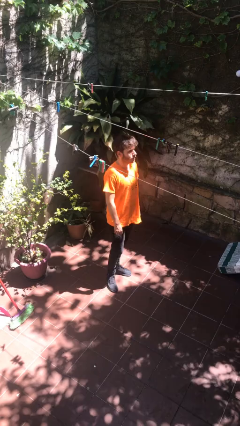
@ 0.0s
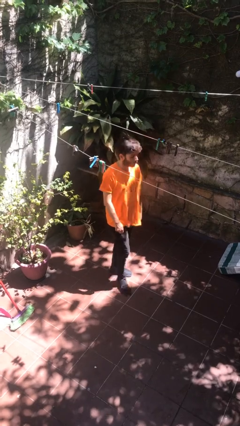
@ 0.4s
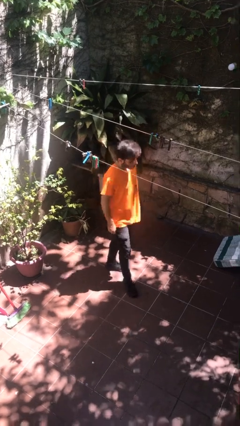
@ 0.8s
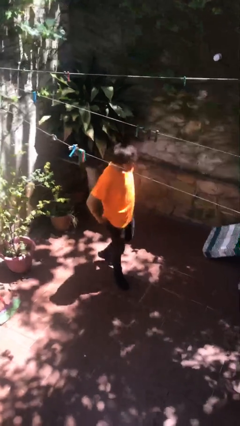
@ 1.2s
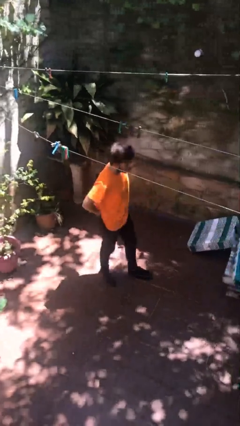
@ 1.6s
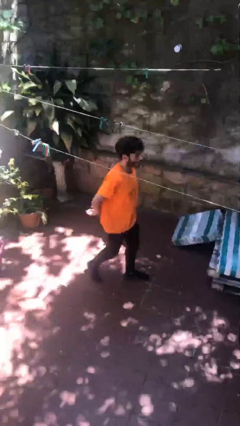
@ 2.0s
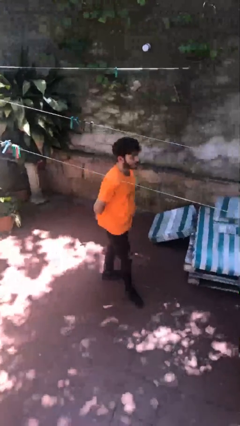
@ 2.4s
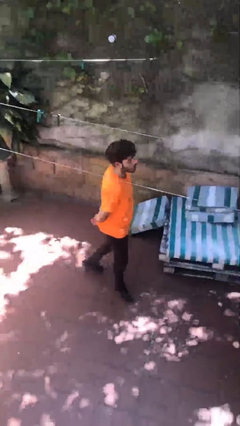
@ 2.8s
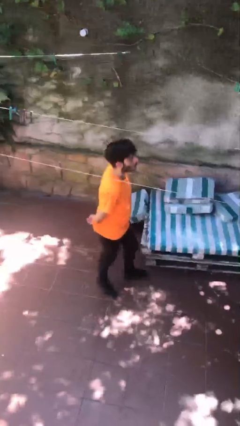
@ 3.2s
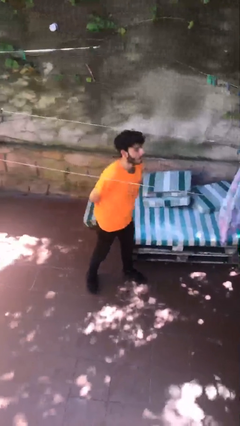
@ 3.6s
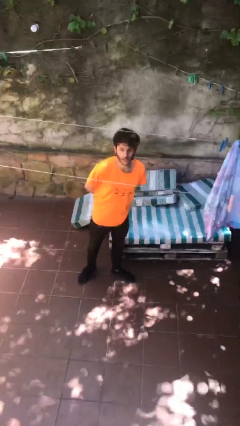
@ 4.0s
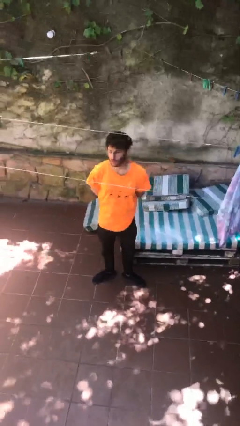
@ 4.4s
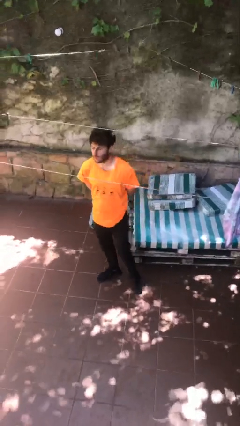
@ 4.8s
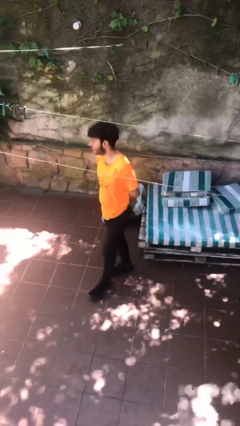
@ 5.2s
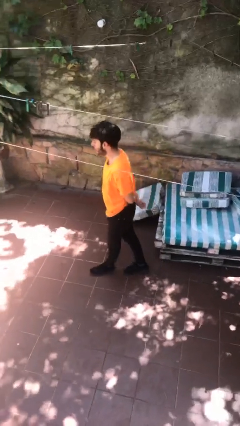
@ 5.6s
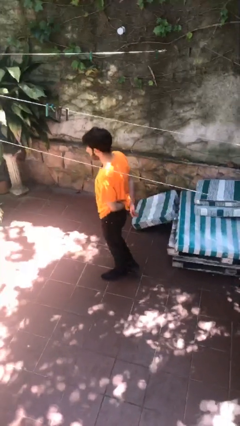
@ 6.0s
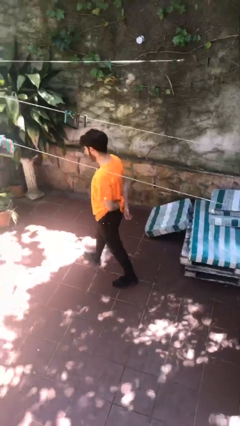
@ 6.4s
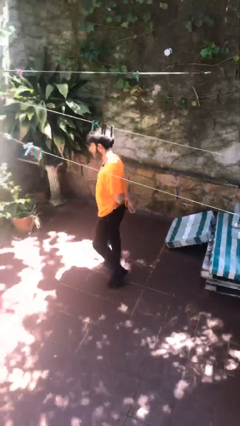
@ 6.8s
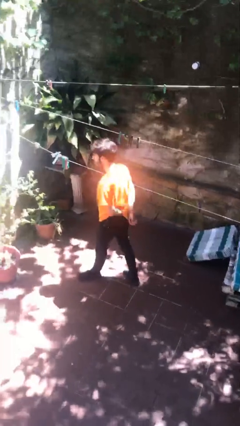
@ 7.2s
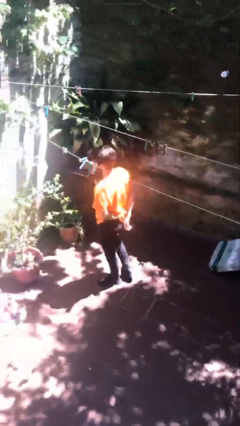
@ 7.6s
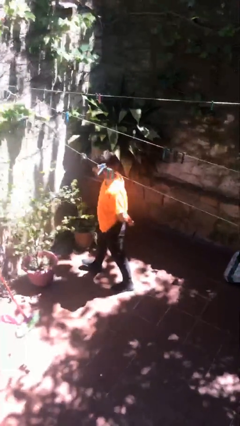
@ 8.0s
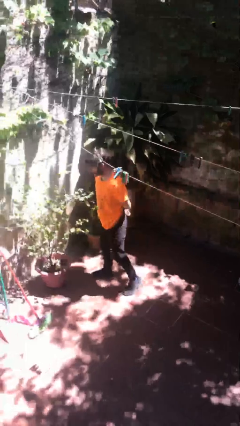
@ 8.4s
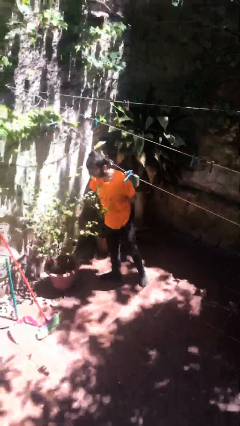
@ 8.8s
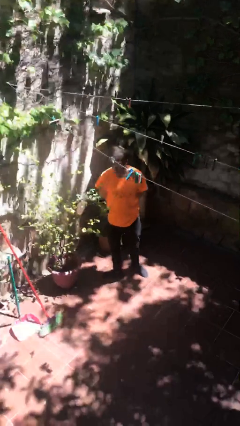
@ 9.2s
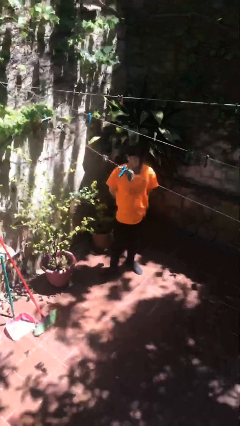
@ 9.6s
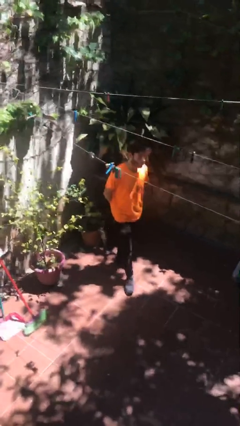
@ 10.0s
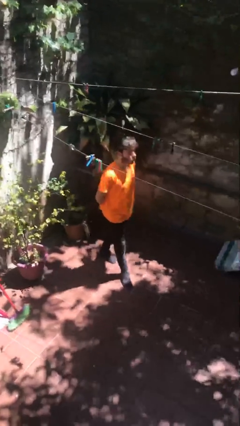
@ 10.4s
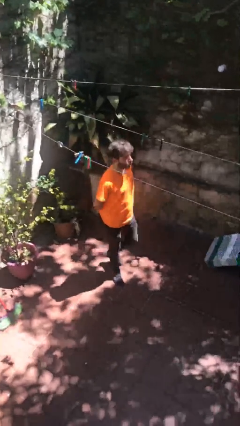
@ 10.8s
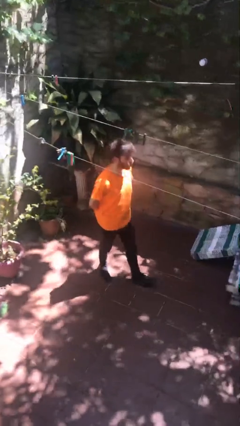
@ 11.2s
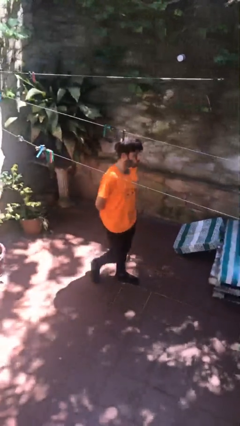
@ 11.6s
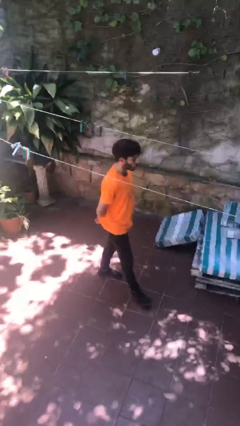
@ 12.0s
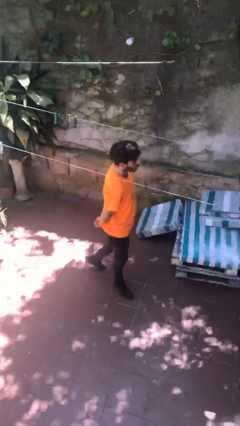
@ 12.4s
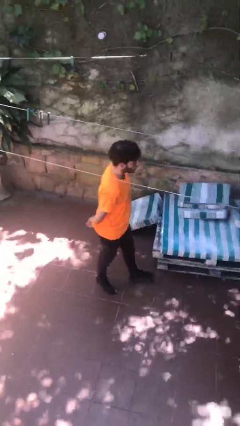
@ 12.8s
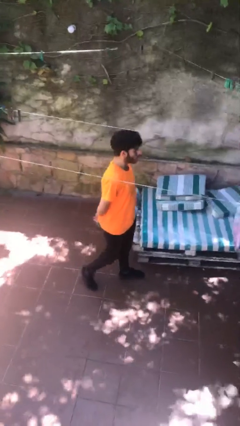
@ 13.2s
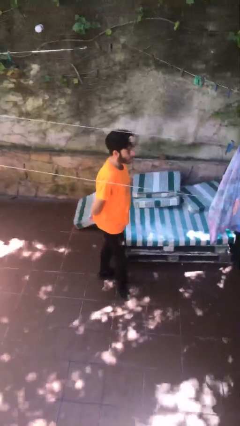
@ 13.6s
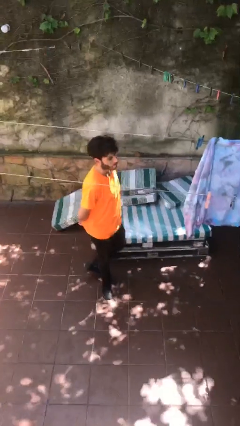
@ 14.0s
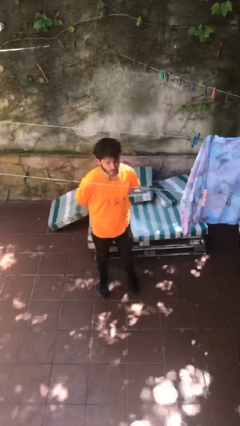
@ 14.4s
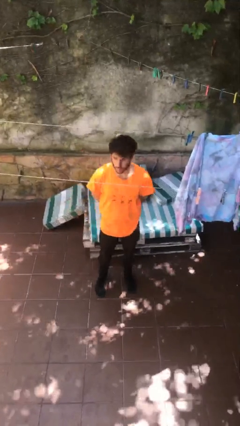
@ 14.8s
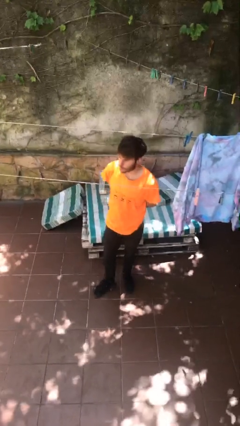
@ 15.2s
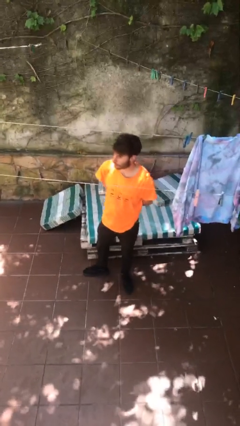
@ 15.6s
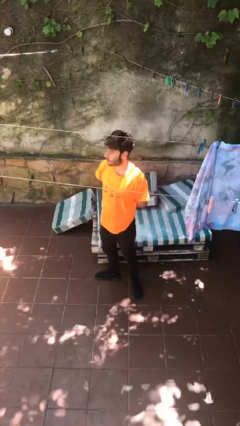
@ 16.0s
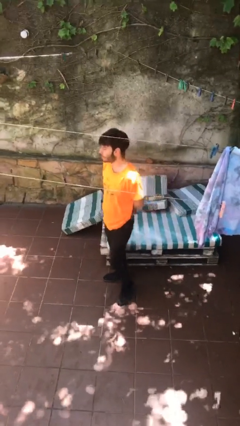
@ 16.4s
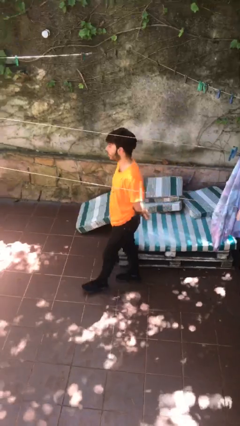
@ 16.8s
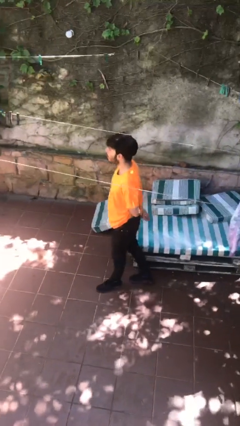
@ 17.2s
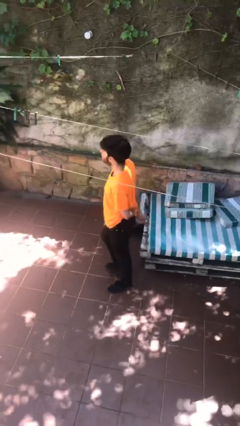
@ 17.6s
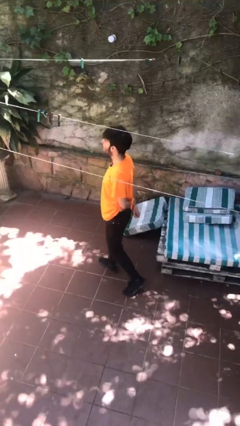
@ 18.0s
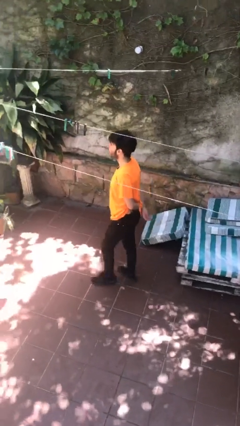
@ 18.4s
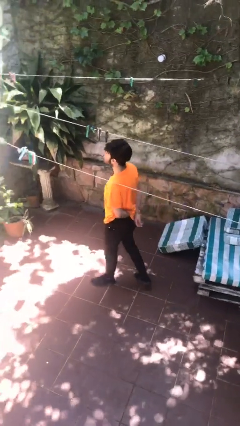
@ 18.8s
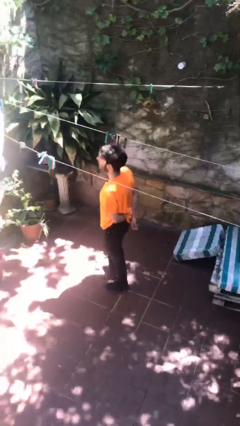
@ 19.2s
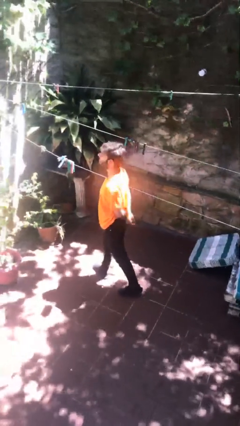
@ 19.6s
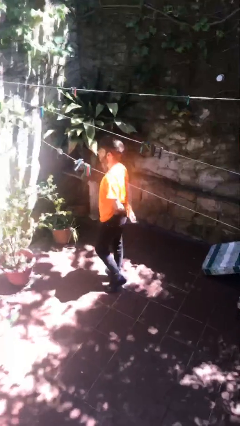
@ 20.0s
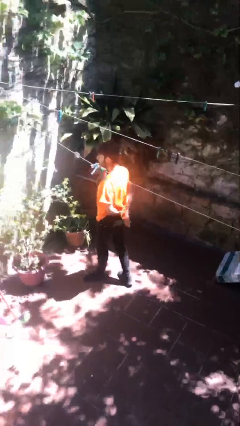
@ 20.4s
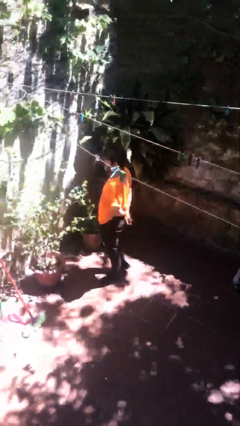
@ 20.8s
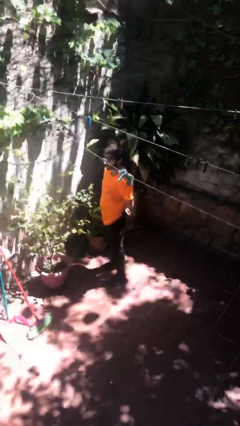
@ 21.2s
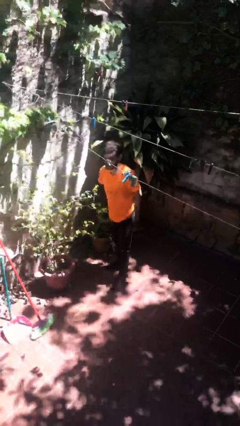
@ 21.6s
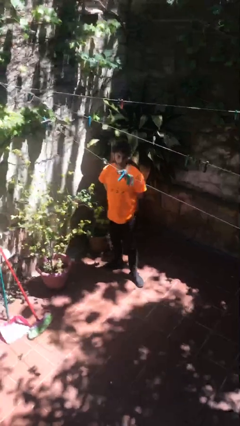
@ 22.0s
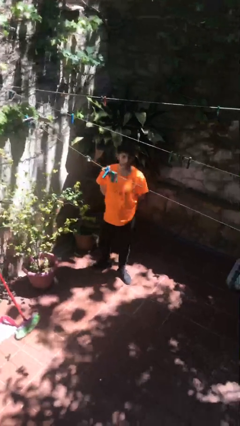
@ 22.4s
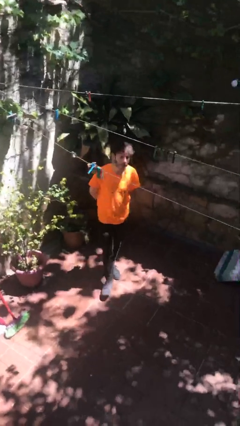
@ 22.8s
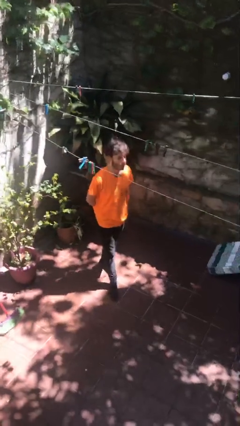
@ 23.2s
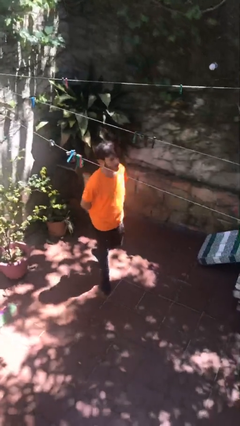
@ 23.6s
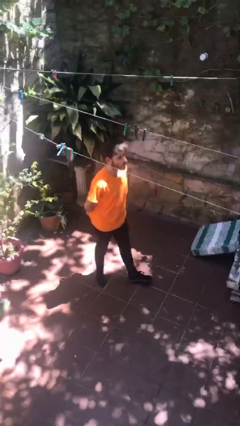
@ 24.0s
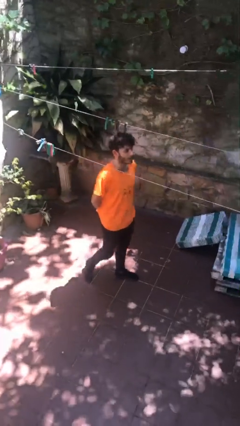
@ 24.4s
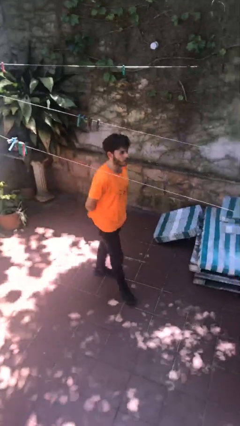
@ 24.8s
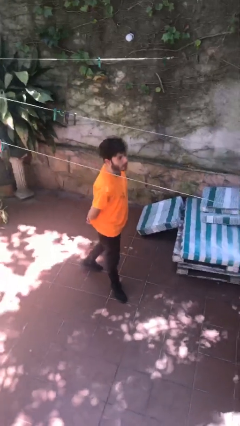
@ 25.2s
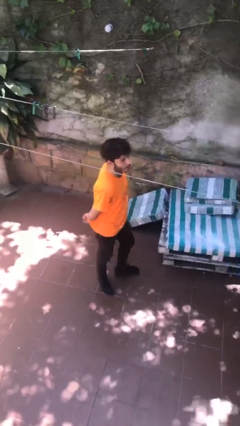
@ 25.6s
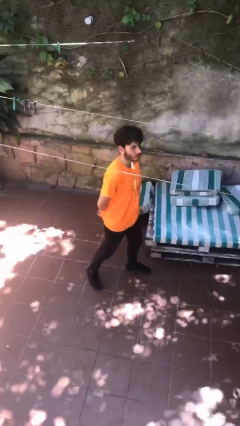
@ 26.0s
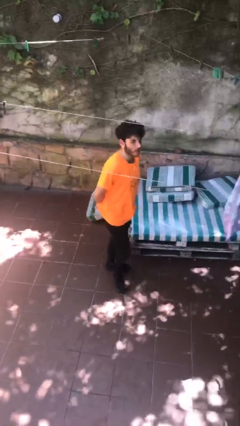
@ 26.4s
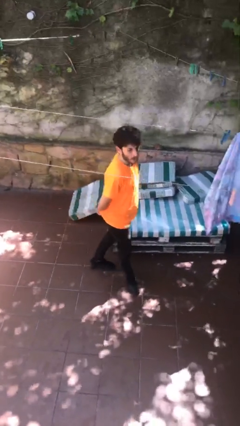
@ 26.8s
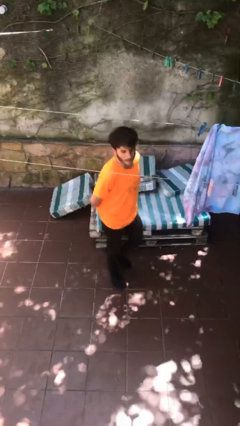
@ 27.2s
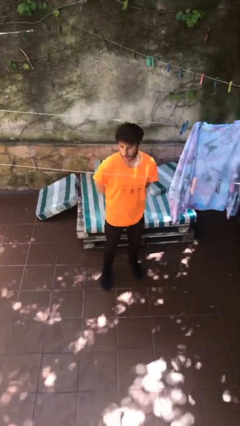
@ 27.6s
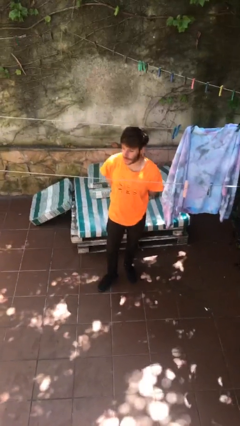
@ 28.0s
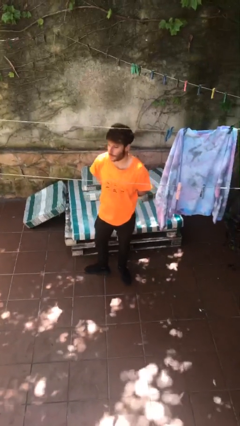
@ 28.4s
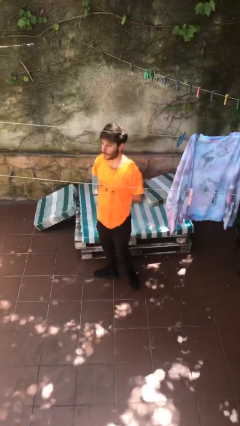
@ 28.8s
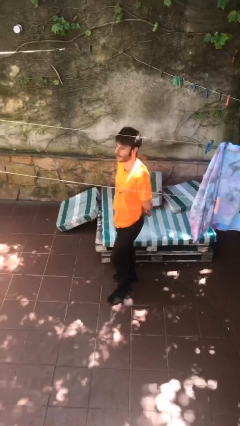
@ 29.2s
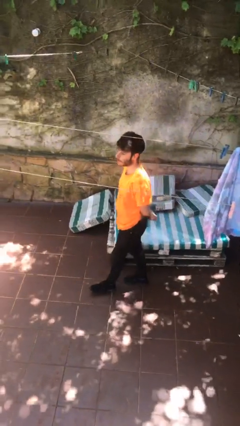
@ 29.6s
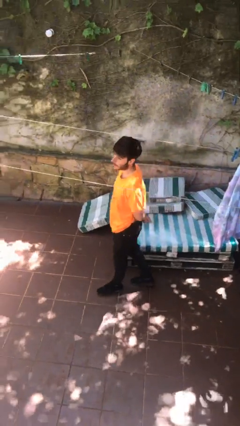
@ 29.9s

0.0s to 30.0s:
person walks

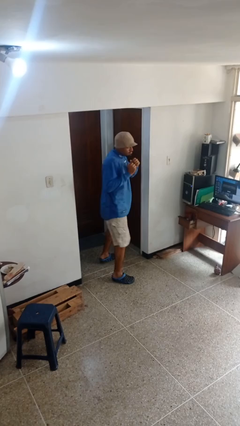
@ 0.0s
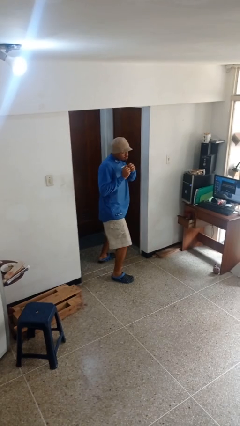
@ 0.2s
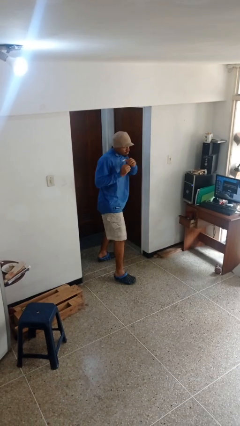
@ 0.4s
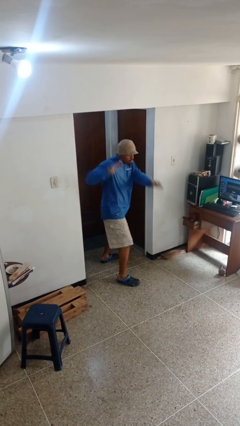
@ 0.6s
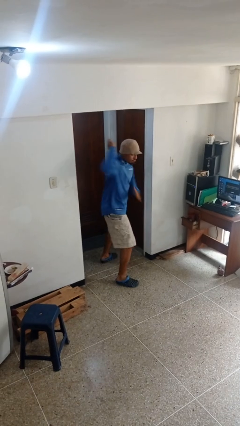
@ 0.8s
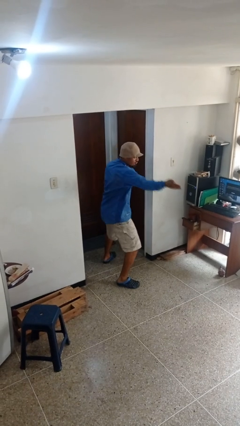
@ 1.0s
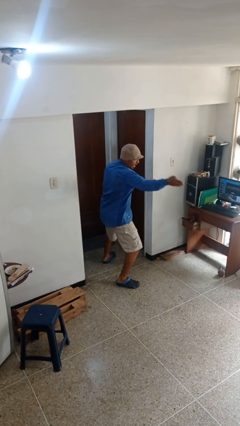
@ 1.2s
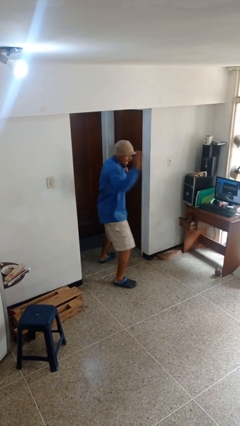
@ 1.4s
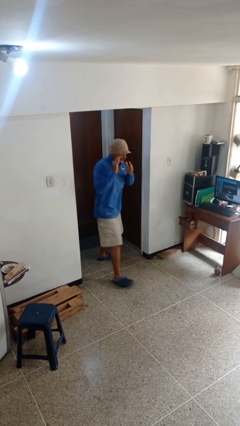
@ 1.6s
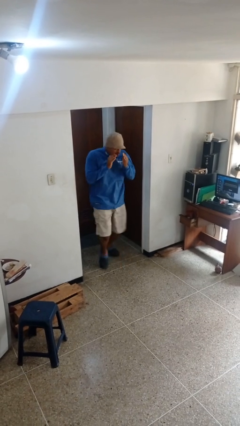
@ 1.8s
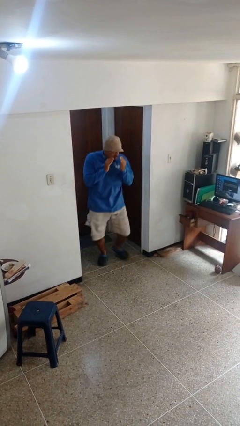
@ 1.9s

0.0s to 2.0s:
person karate chop

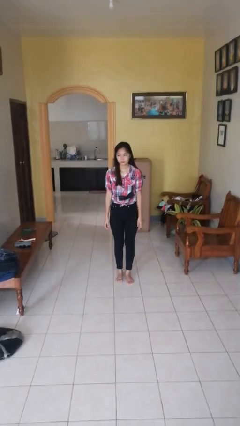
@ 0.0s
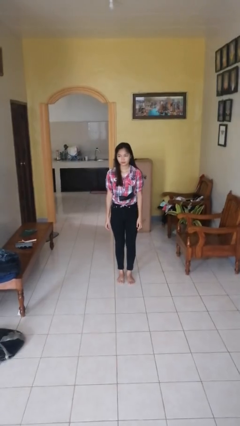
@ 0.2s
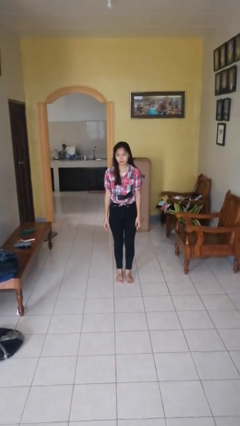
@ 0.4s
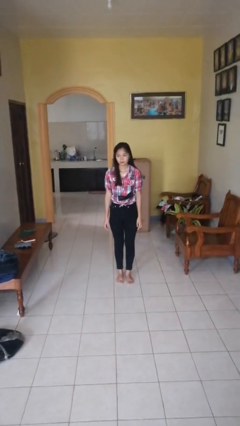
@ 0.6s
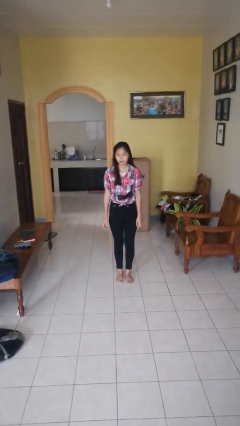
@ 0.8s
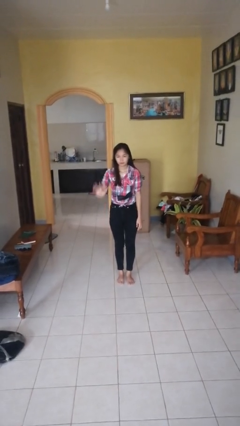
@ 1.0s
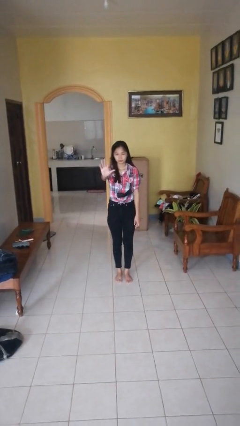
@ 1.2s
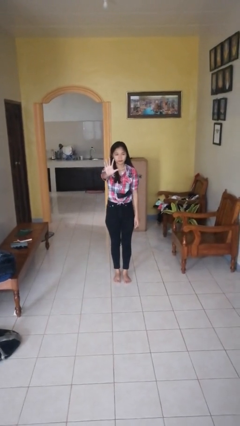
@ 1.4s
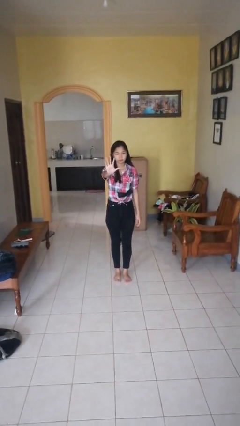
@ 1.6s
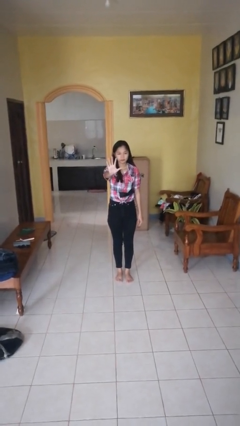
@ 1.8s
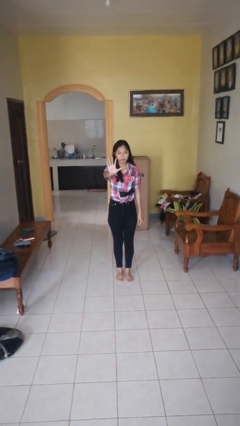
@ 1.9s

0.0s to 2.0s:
person gestures number five
